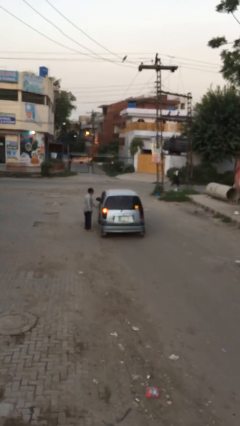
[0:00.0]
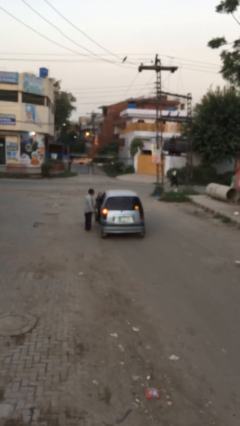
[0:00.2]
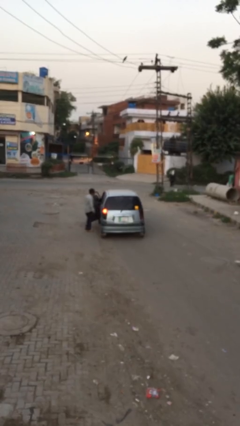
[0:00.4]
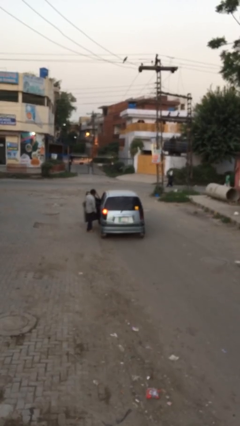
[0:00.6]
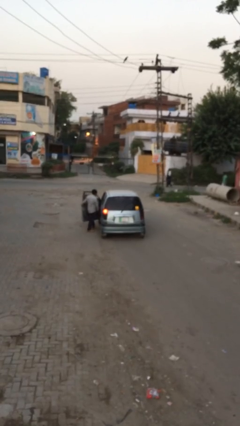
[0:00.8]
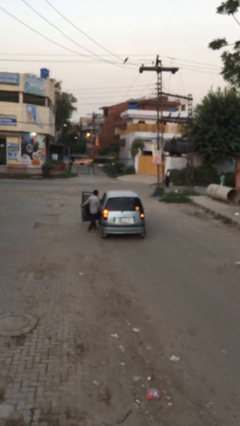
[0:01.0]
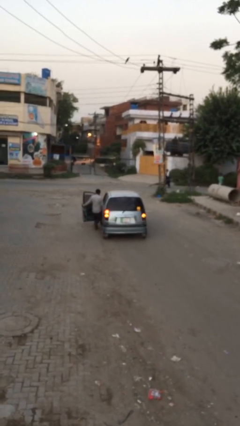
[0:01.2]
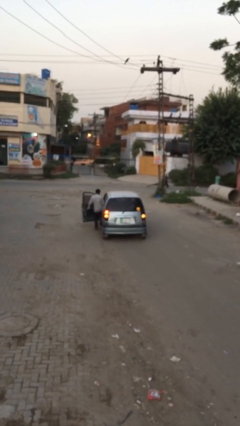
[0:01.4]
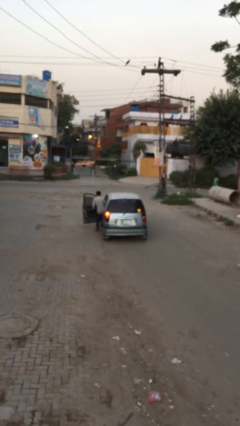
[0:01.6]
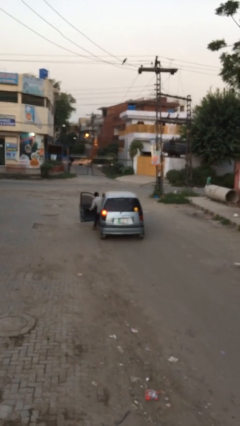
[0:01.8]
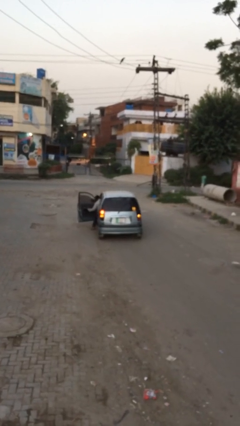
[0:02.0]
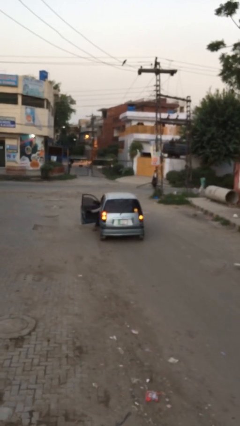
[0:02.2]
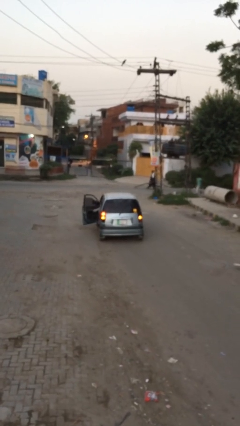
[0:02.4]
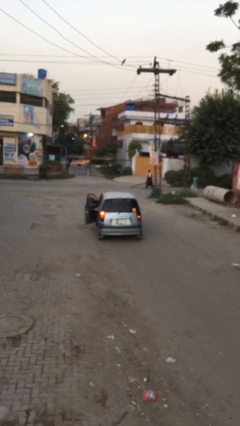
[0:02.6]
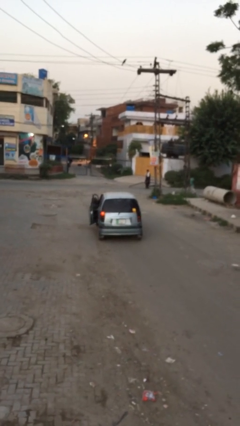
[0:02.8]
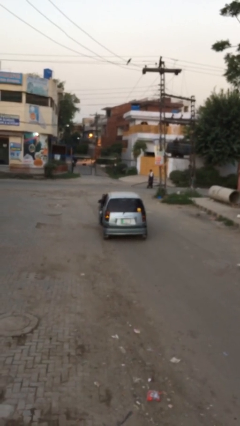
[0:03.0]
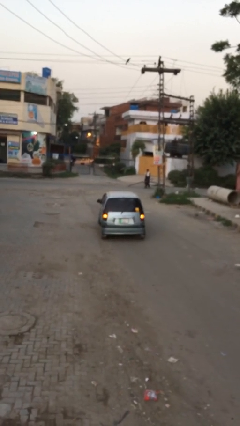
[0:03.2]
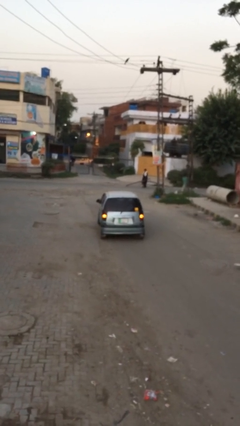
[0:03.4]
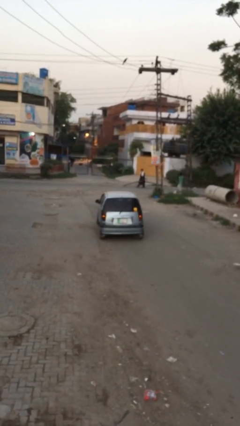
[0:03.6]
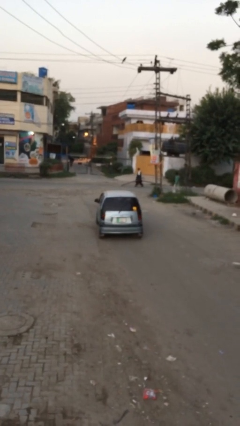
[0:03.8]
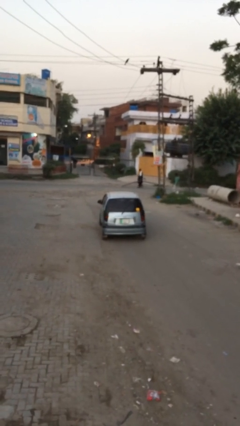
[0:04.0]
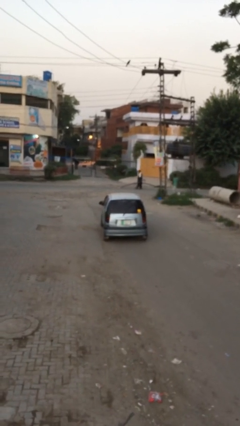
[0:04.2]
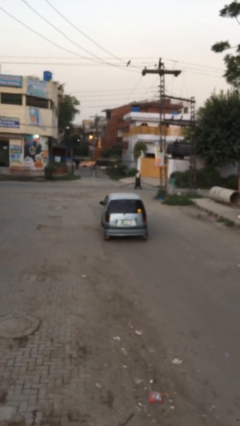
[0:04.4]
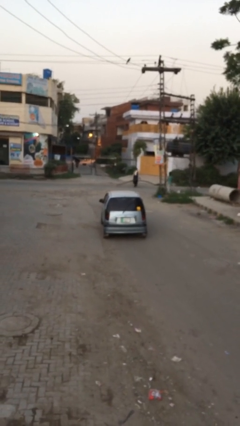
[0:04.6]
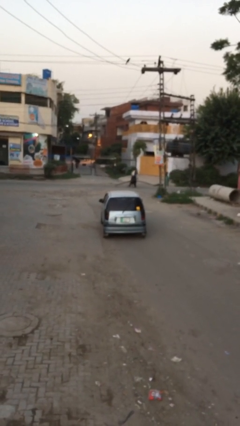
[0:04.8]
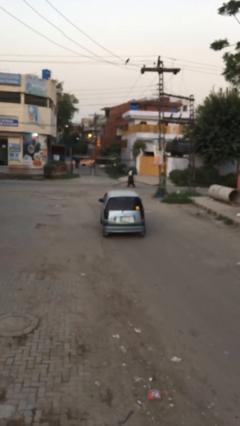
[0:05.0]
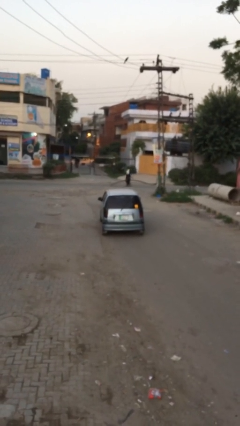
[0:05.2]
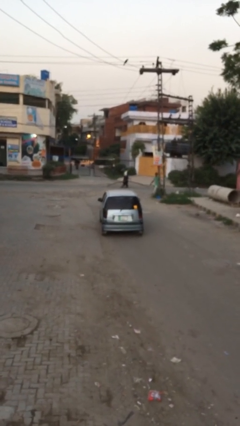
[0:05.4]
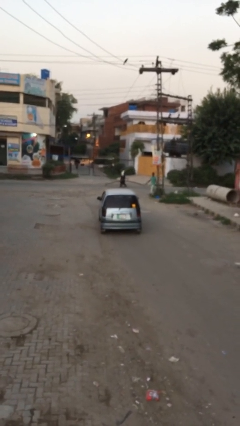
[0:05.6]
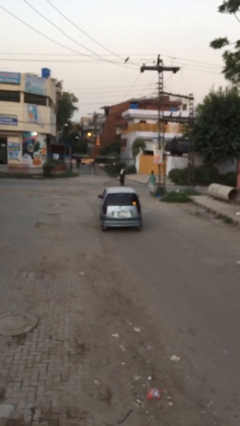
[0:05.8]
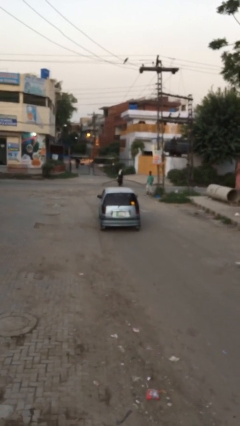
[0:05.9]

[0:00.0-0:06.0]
car picks up person

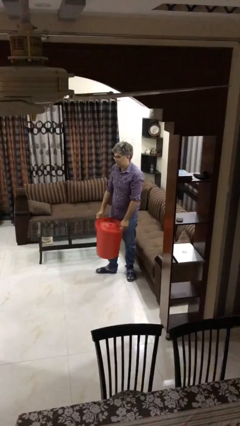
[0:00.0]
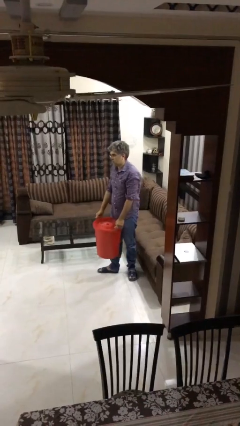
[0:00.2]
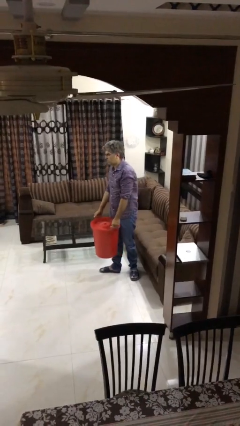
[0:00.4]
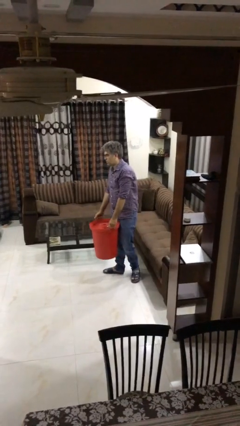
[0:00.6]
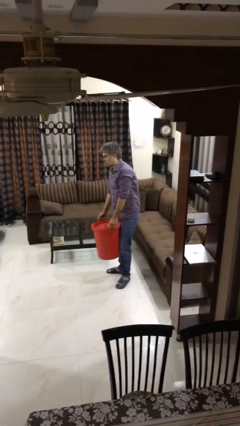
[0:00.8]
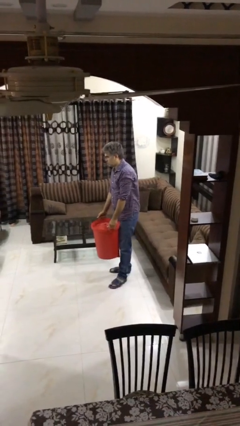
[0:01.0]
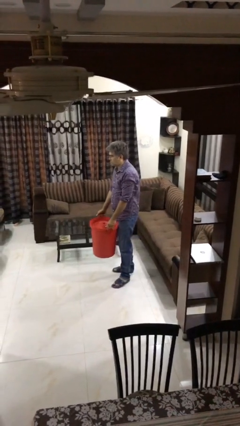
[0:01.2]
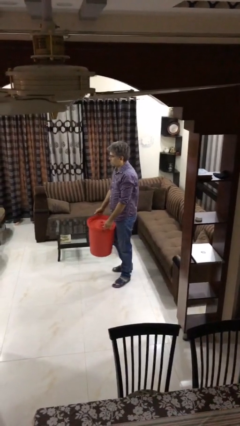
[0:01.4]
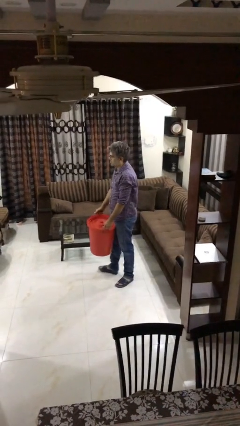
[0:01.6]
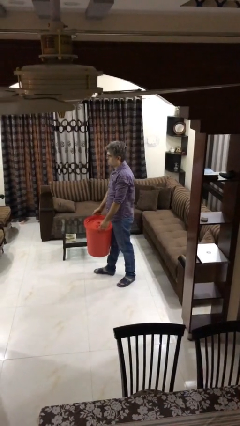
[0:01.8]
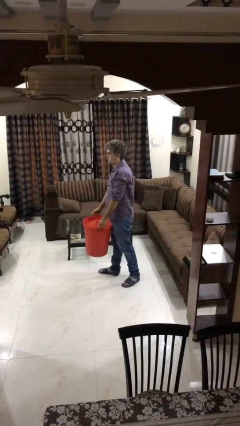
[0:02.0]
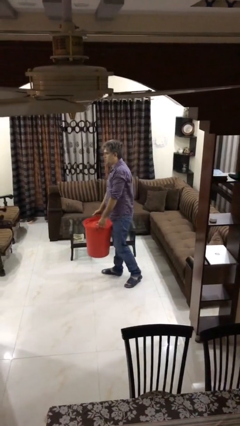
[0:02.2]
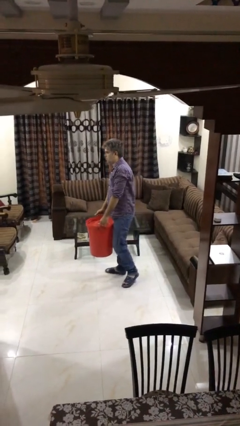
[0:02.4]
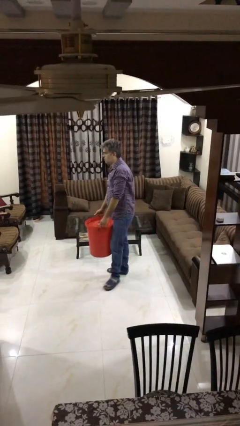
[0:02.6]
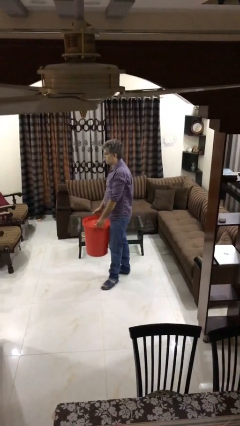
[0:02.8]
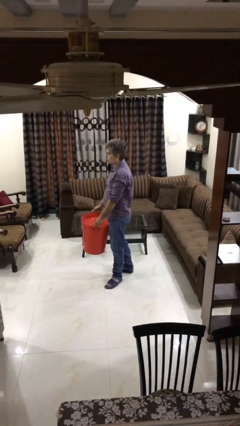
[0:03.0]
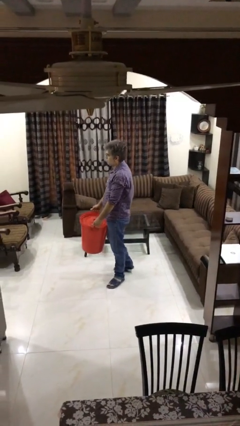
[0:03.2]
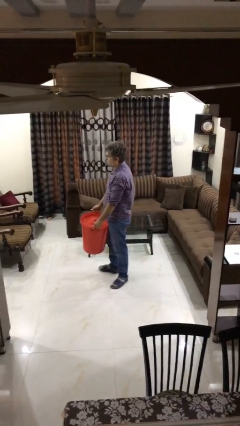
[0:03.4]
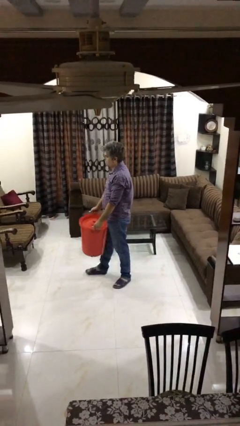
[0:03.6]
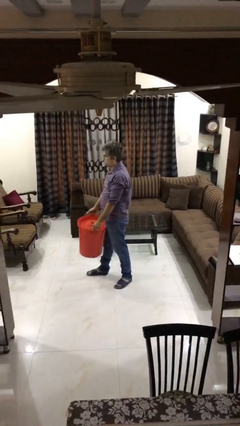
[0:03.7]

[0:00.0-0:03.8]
person carries heavy object

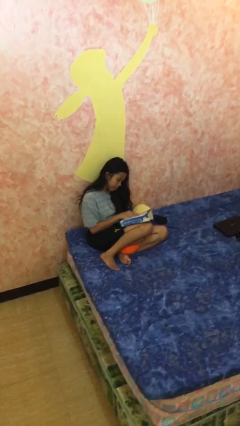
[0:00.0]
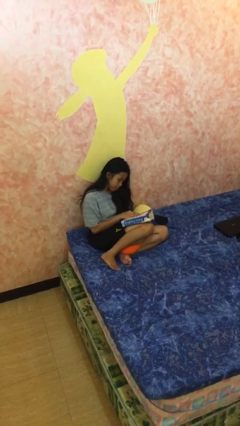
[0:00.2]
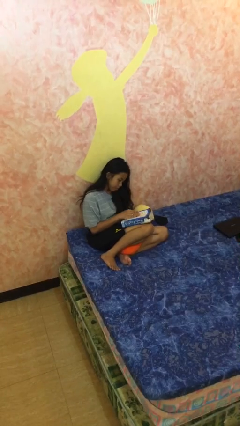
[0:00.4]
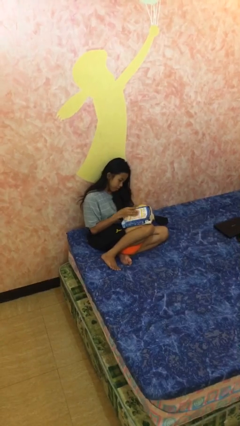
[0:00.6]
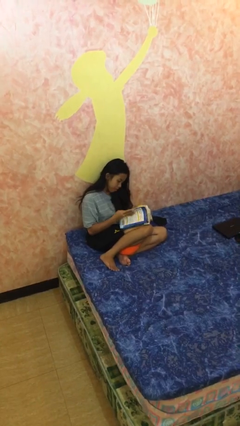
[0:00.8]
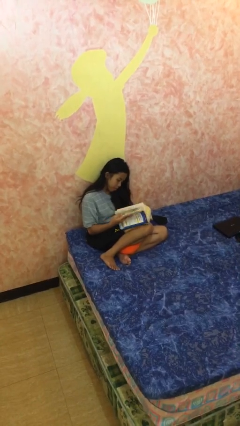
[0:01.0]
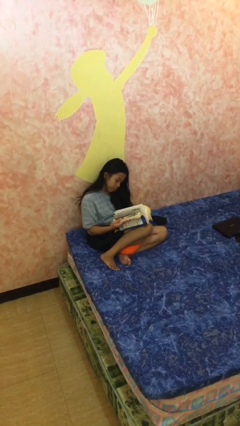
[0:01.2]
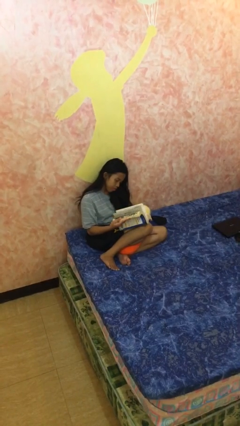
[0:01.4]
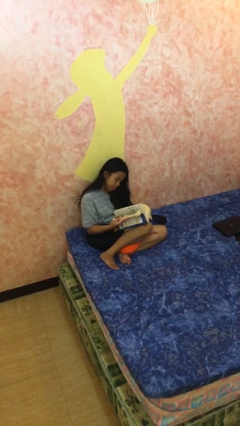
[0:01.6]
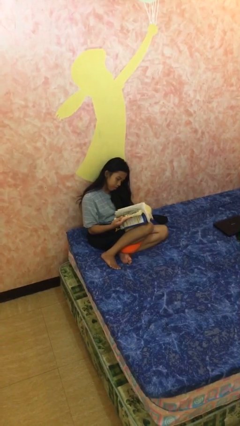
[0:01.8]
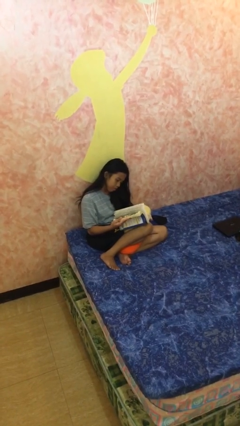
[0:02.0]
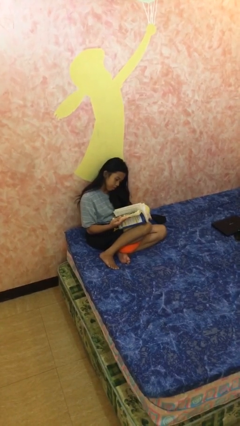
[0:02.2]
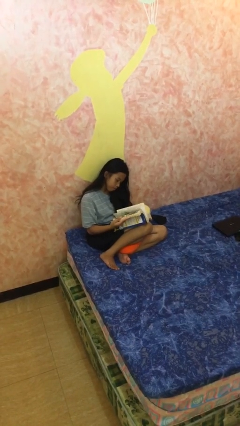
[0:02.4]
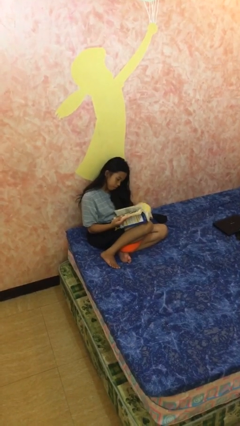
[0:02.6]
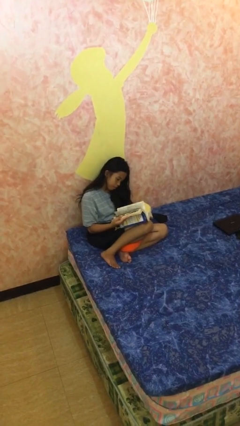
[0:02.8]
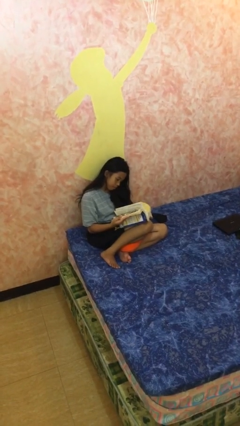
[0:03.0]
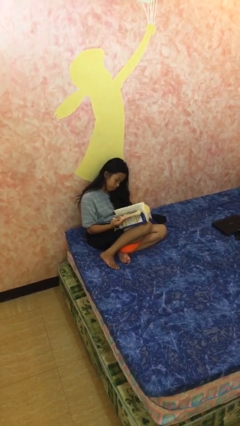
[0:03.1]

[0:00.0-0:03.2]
person reads document

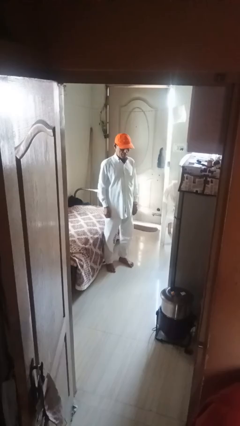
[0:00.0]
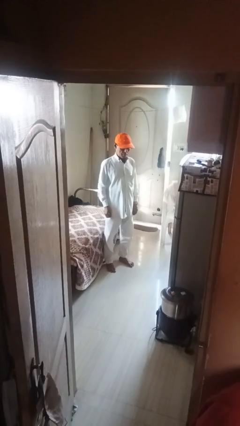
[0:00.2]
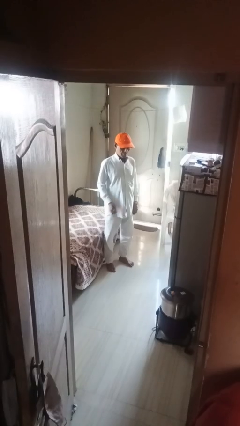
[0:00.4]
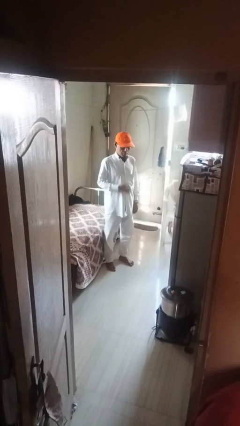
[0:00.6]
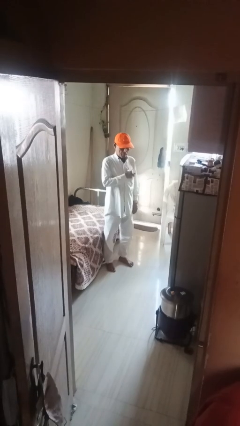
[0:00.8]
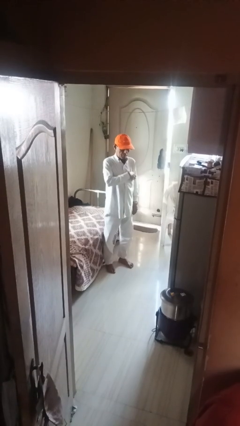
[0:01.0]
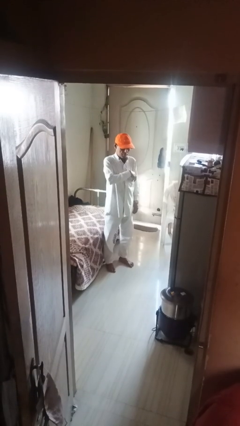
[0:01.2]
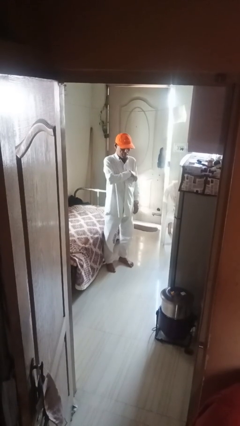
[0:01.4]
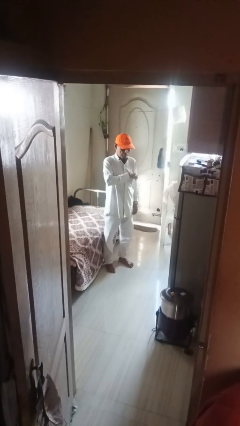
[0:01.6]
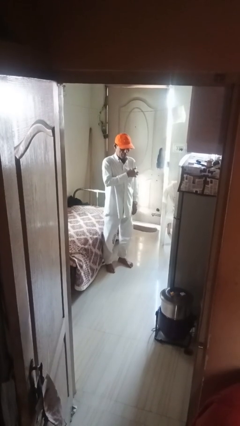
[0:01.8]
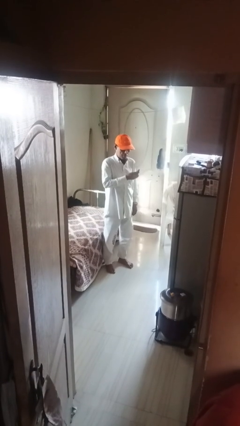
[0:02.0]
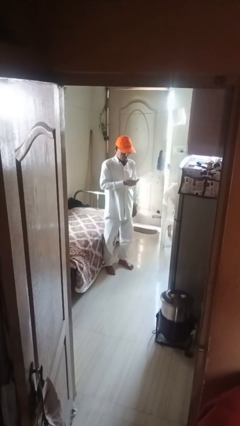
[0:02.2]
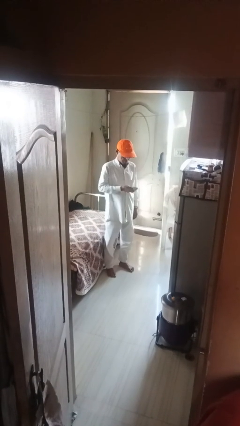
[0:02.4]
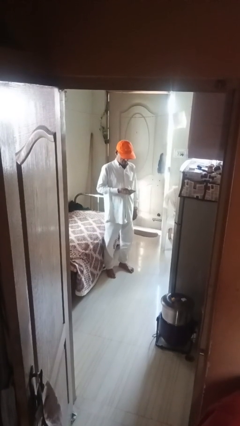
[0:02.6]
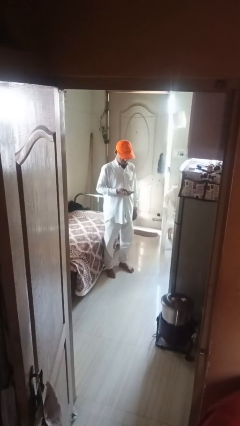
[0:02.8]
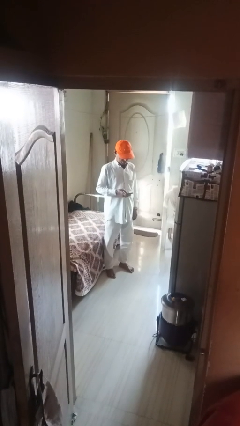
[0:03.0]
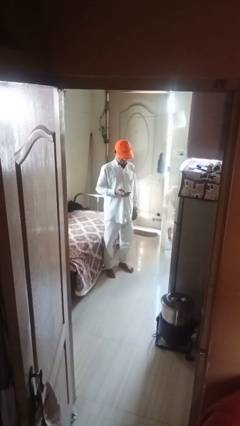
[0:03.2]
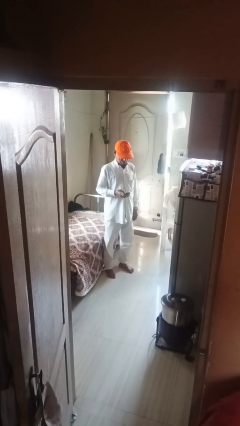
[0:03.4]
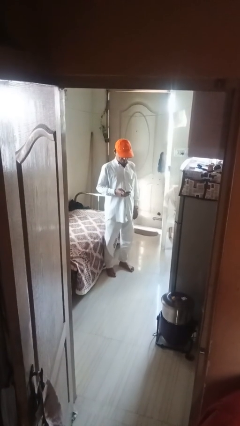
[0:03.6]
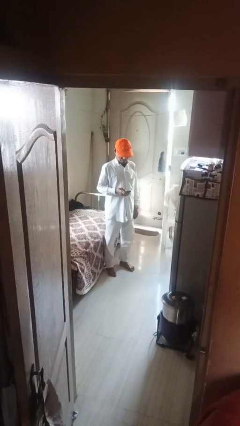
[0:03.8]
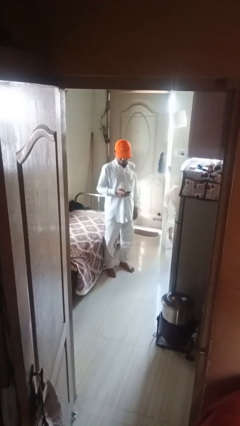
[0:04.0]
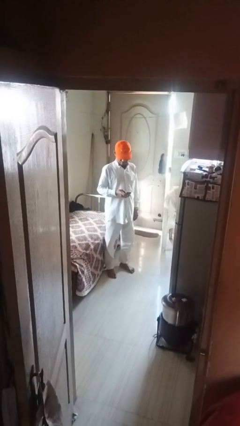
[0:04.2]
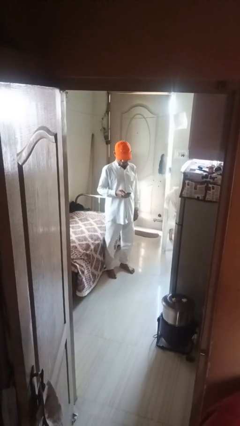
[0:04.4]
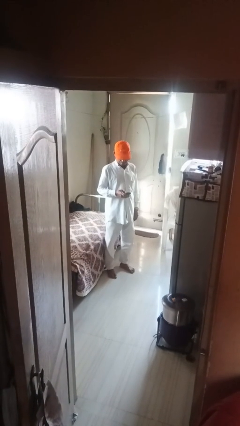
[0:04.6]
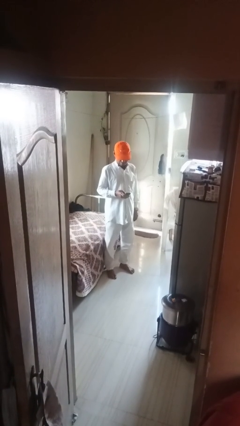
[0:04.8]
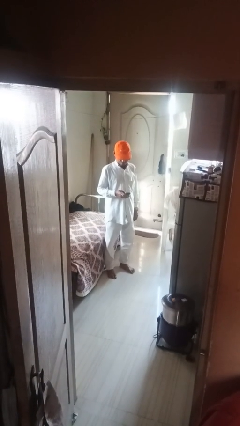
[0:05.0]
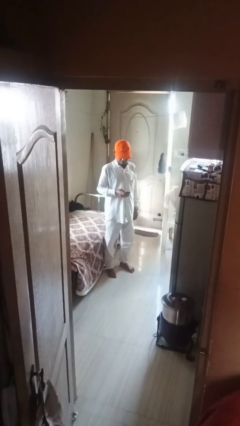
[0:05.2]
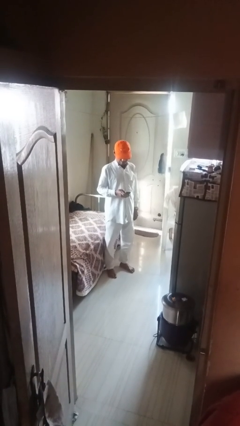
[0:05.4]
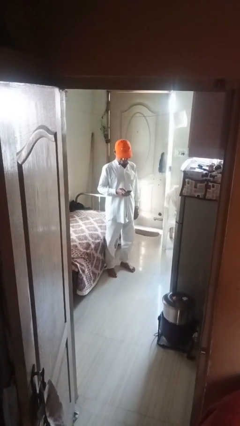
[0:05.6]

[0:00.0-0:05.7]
person takes phone from pocket
